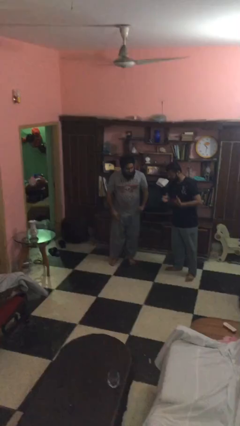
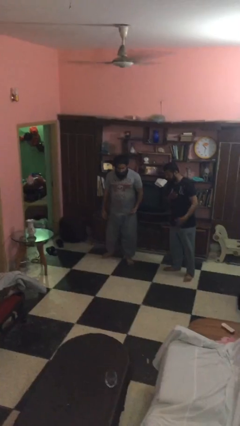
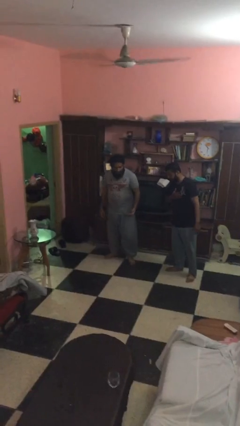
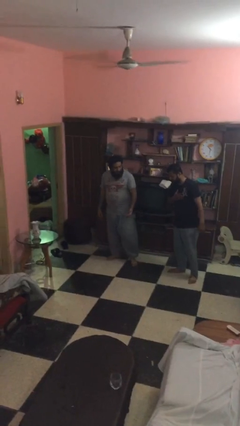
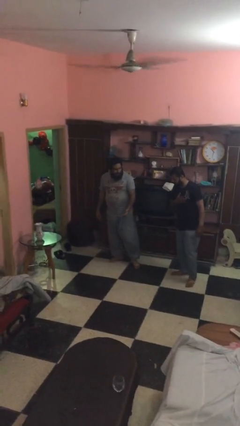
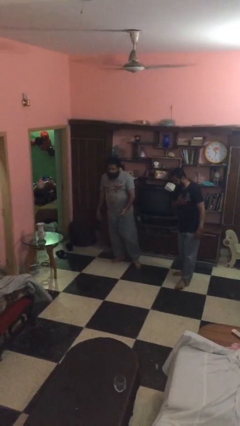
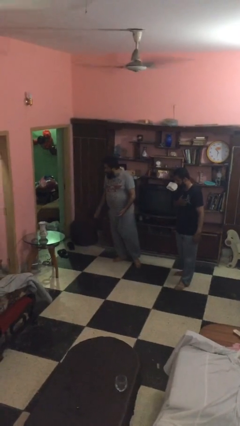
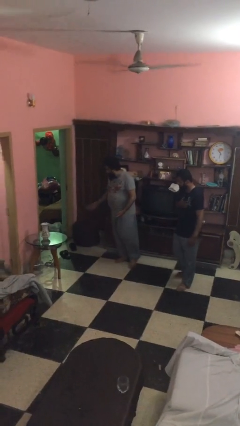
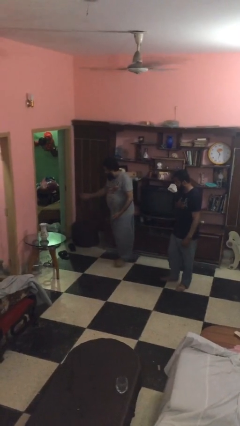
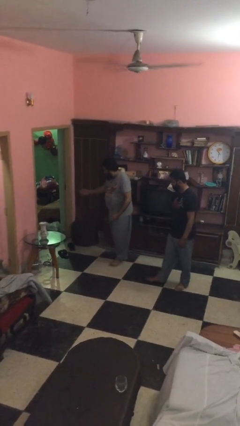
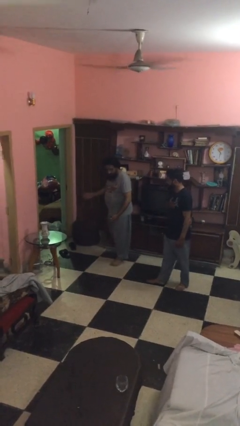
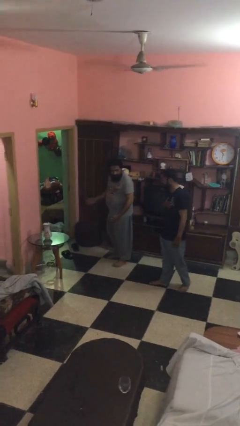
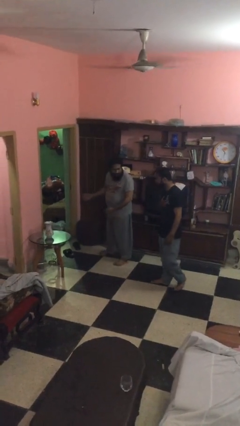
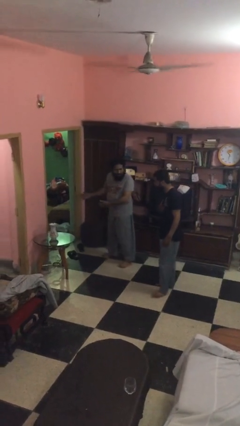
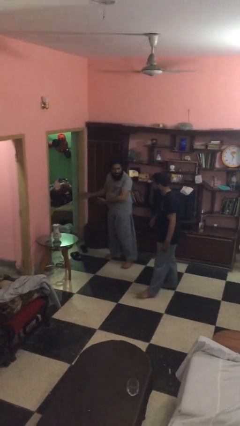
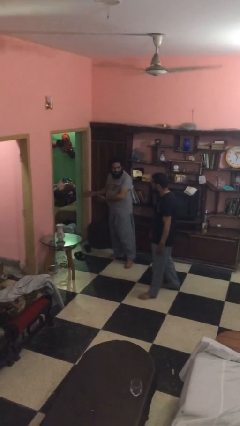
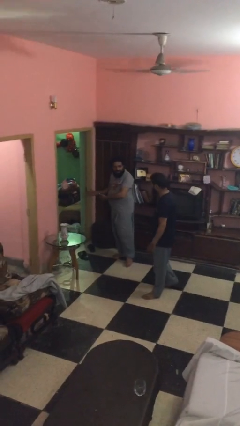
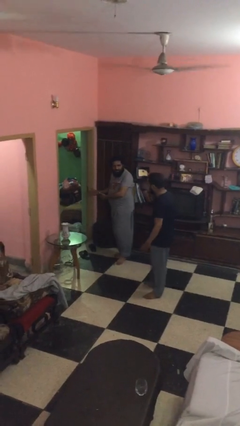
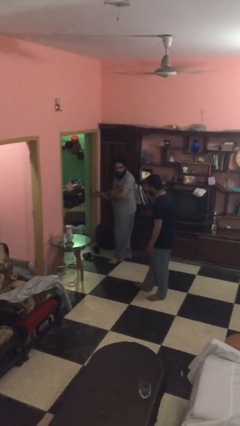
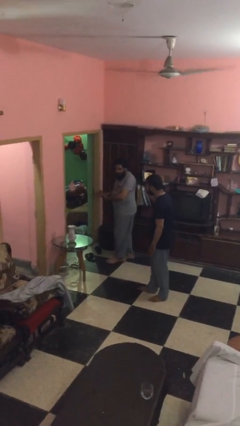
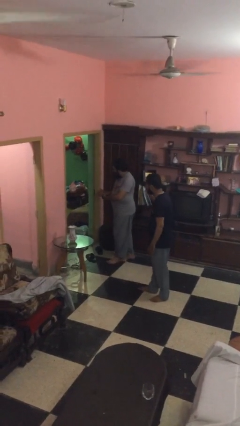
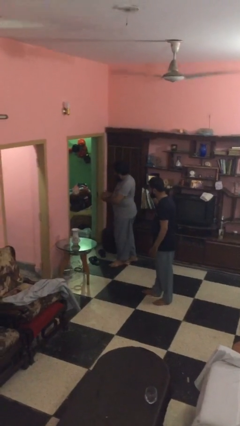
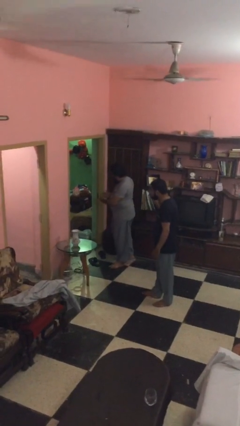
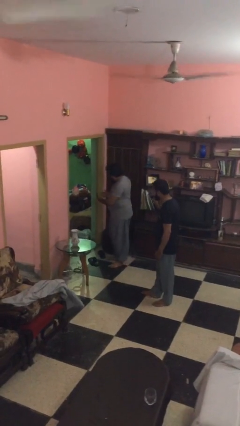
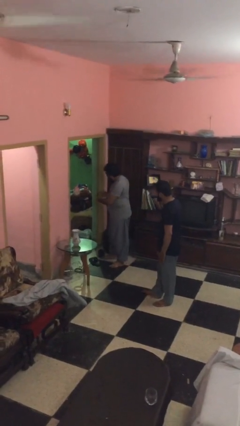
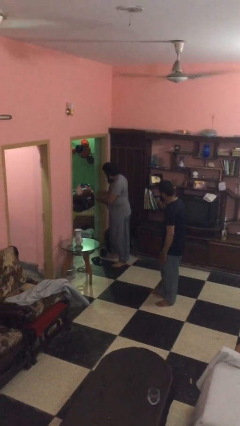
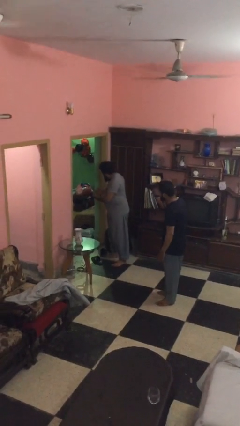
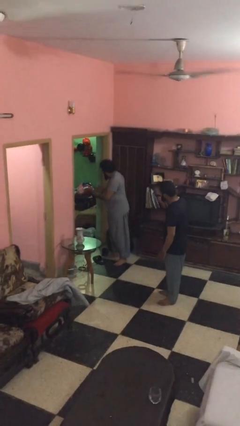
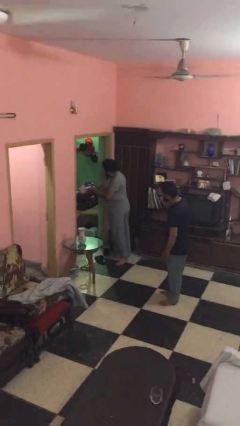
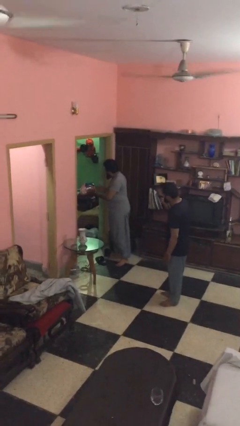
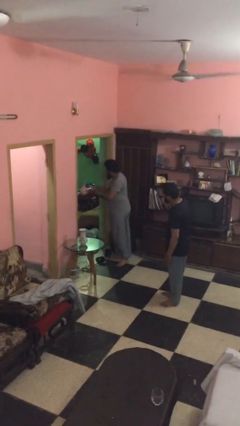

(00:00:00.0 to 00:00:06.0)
person talks to person

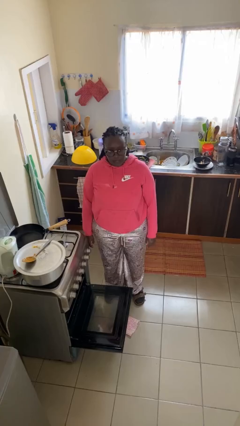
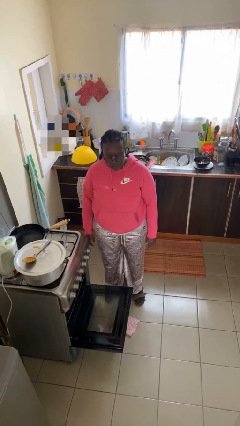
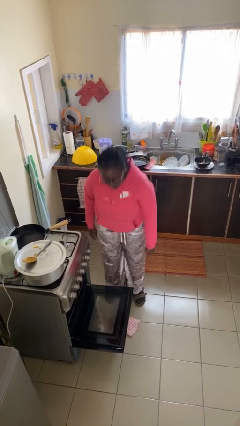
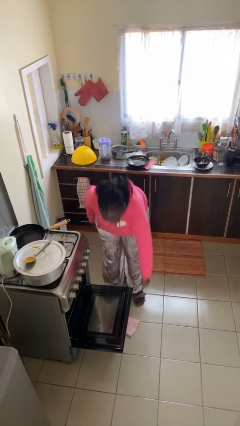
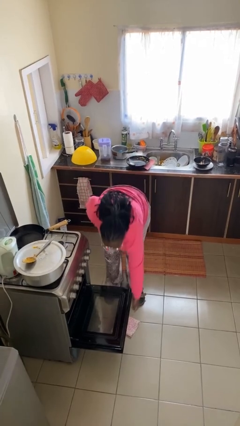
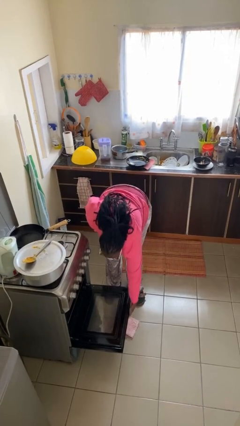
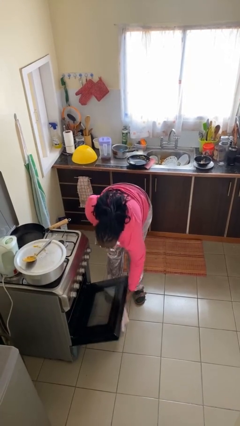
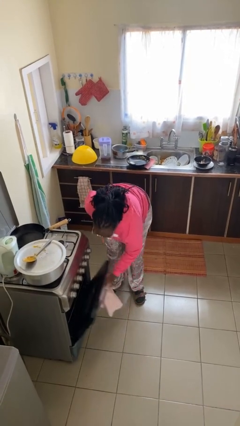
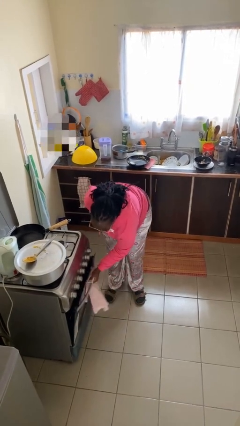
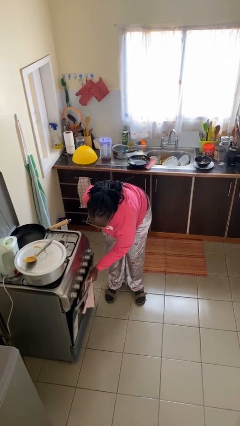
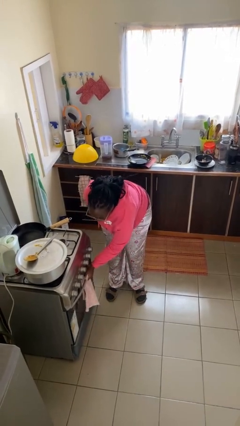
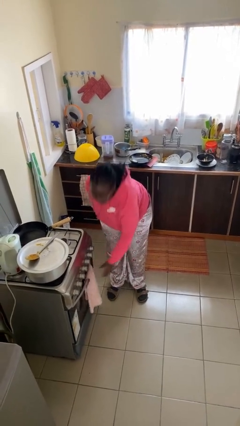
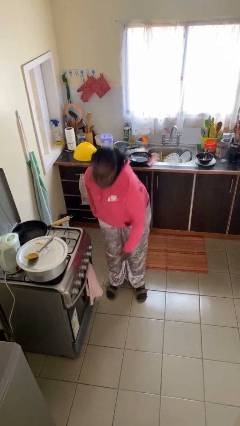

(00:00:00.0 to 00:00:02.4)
person closes oven door

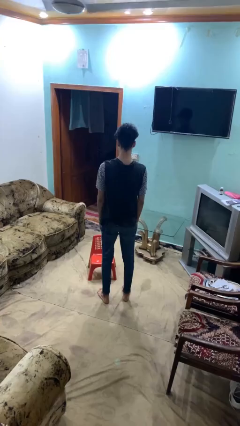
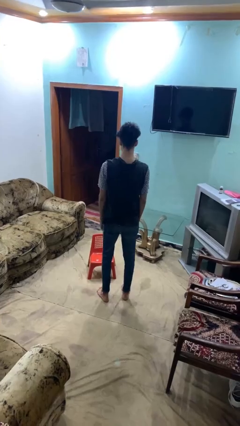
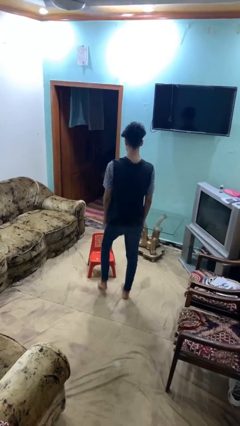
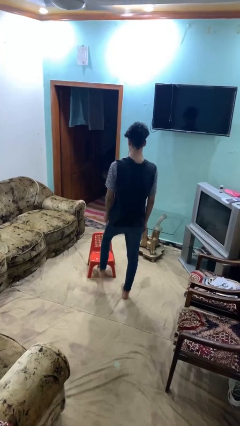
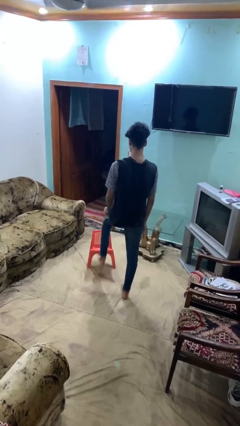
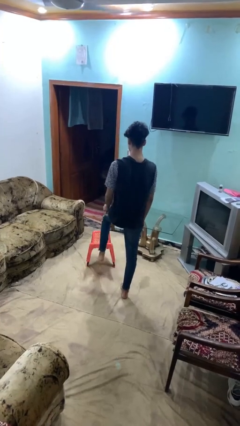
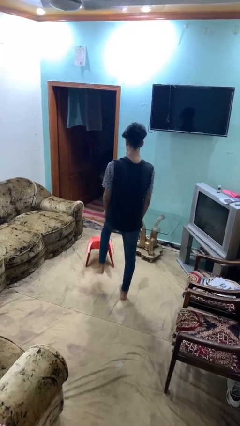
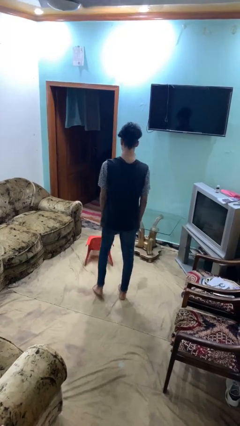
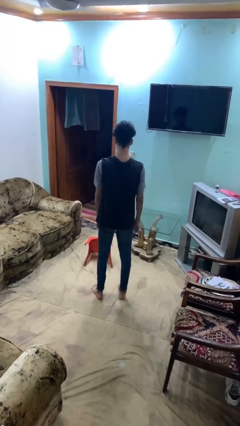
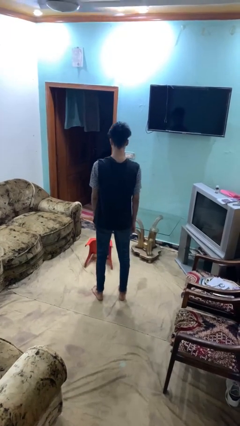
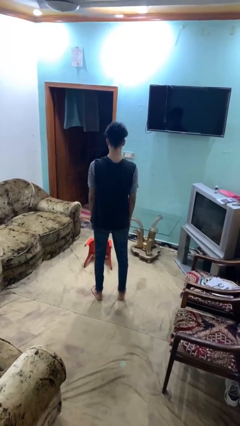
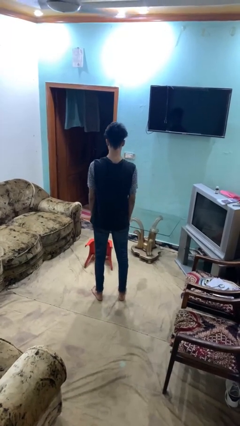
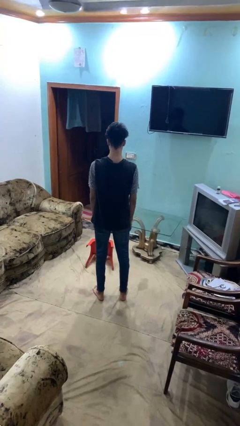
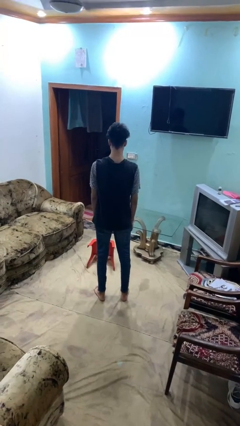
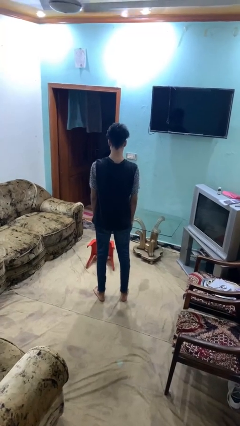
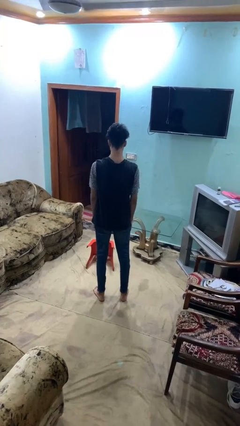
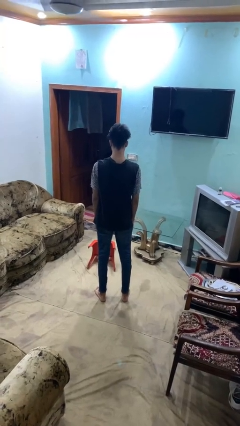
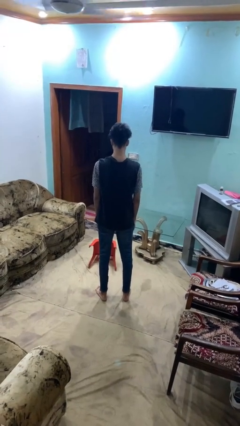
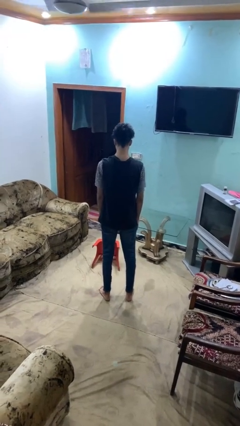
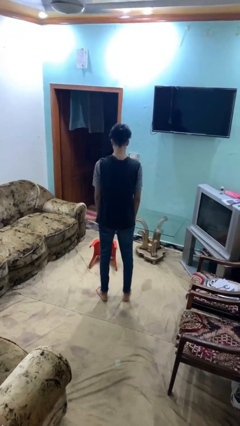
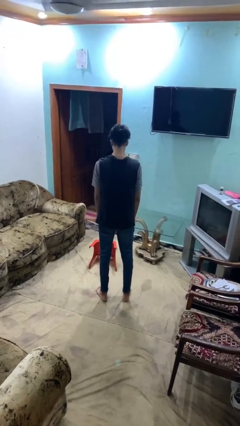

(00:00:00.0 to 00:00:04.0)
person knocks over furniture

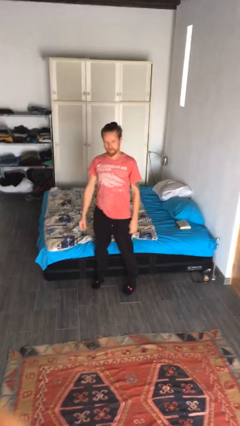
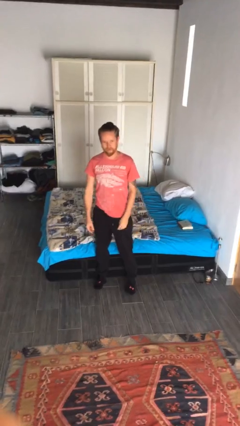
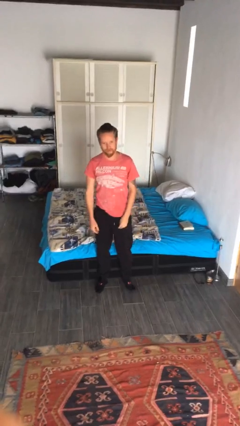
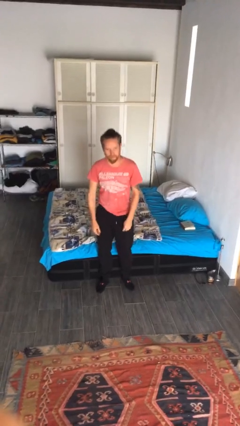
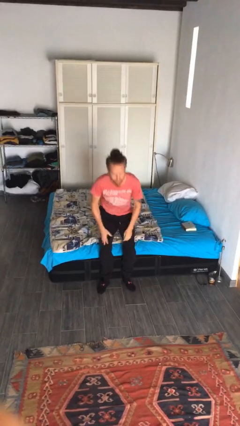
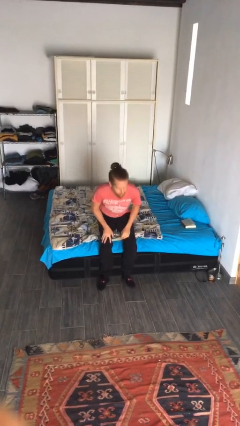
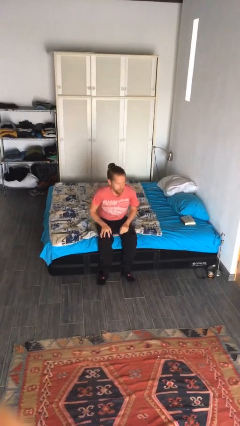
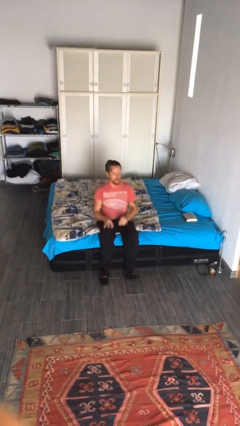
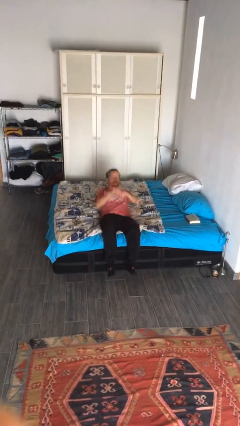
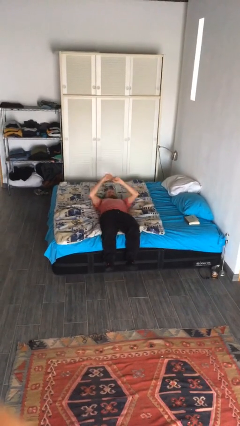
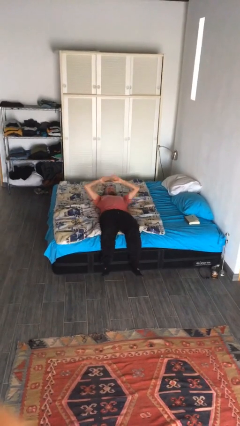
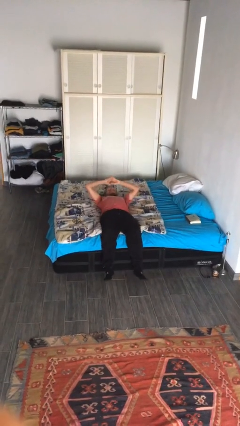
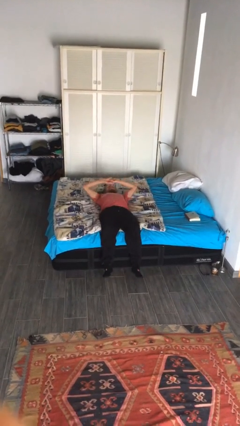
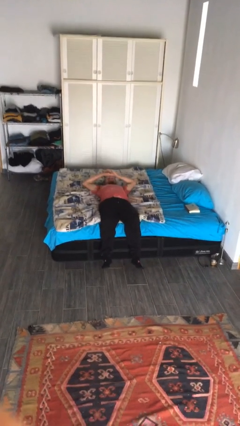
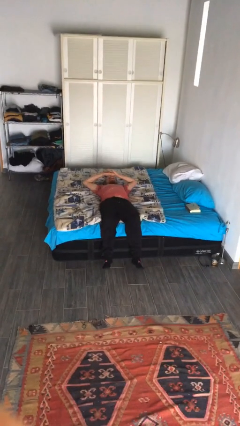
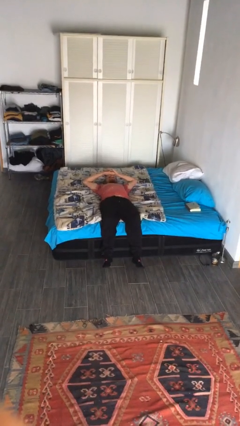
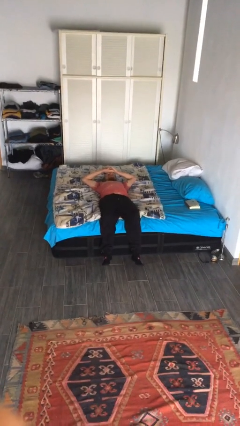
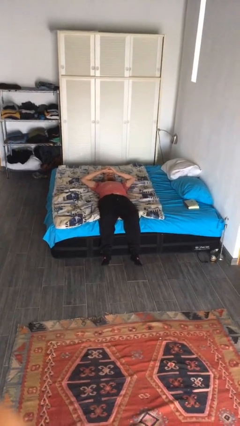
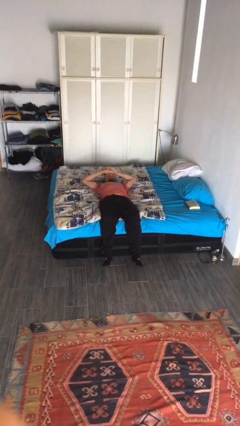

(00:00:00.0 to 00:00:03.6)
person lies down on bed

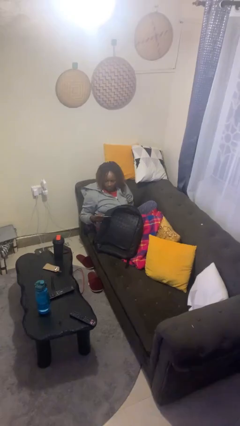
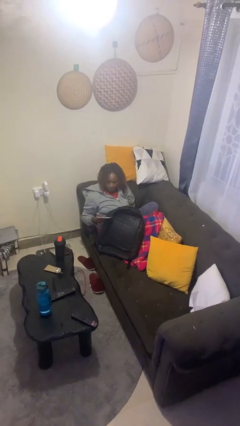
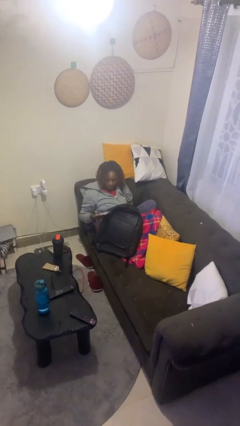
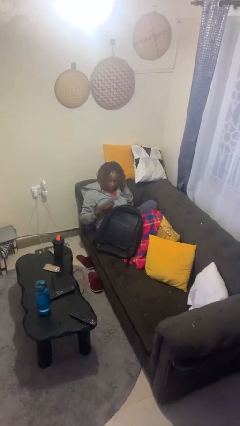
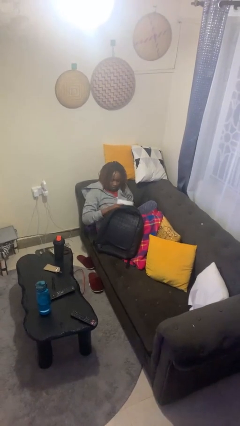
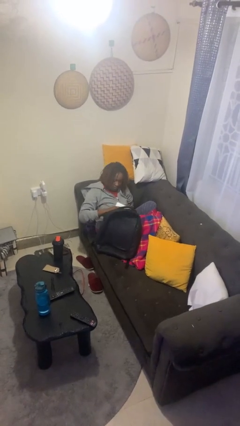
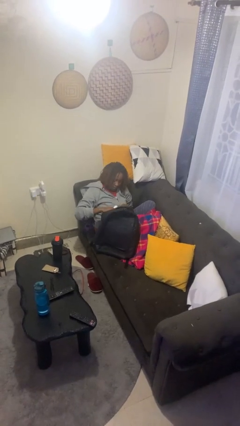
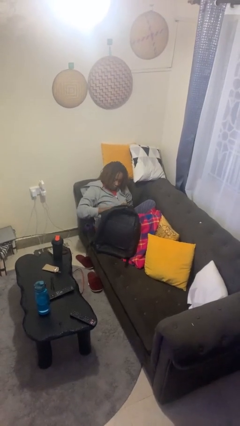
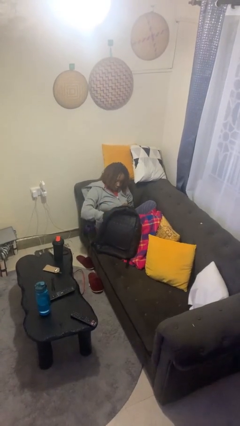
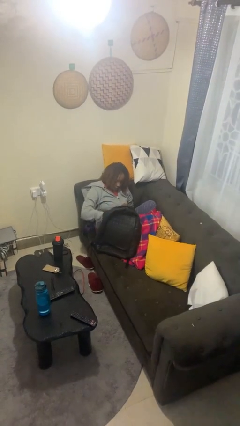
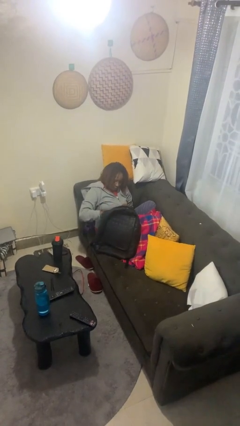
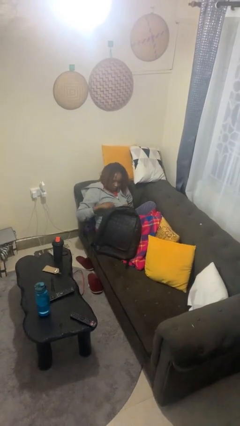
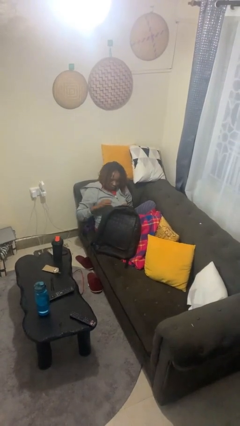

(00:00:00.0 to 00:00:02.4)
person puts object into backpack
